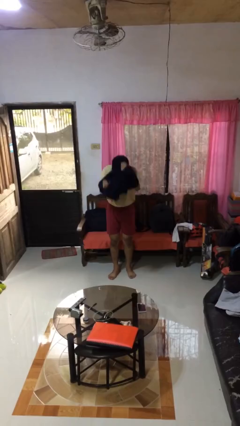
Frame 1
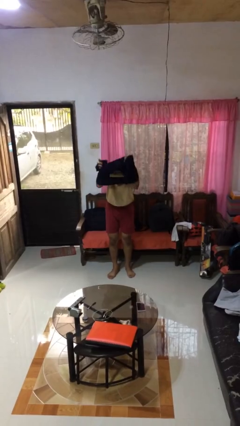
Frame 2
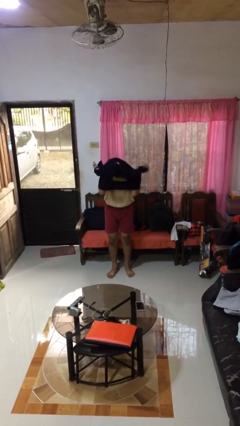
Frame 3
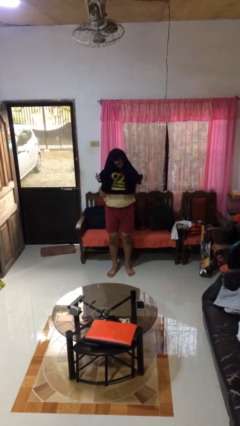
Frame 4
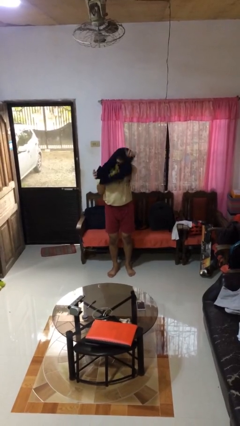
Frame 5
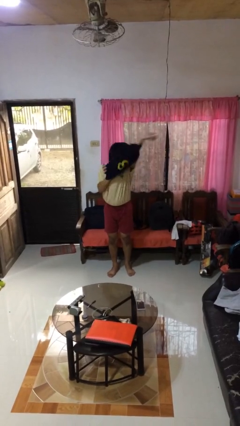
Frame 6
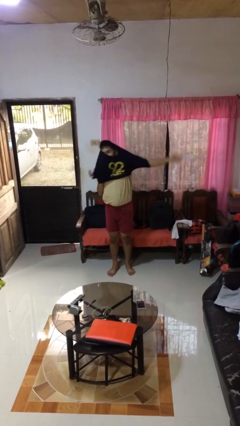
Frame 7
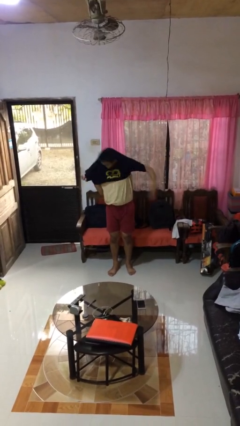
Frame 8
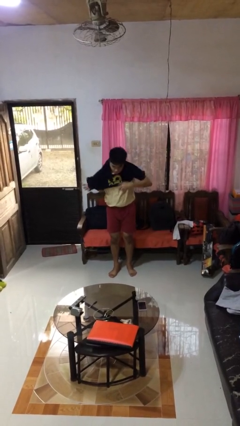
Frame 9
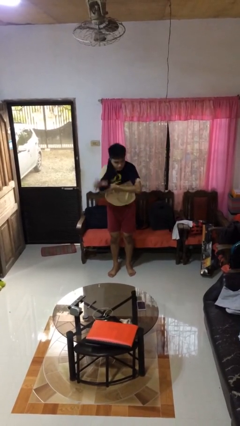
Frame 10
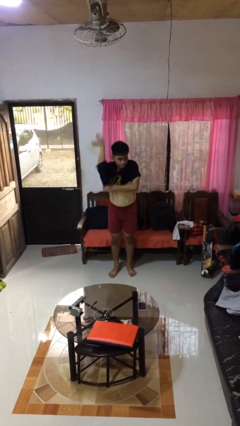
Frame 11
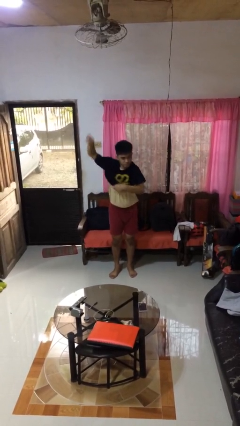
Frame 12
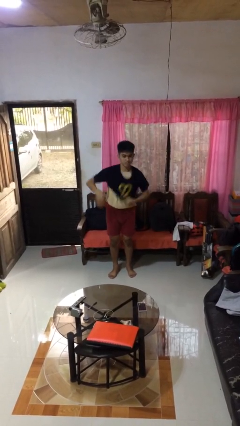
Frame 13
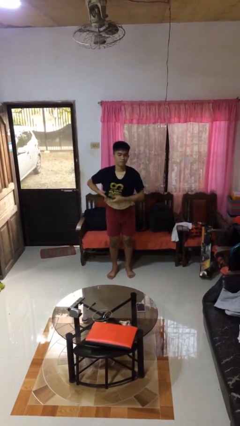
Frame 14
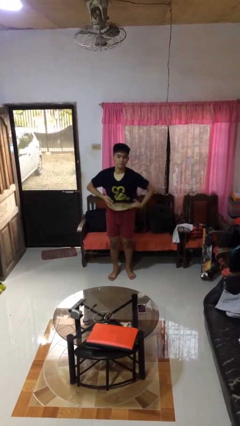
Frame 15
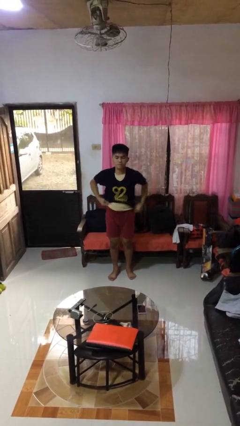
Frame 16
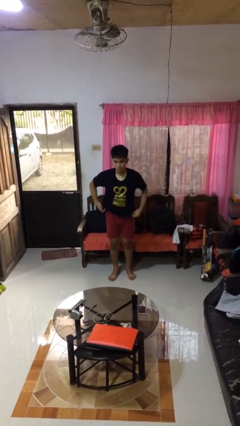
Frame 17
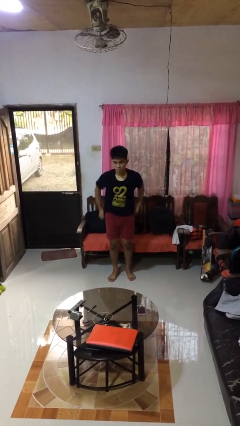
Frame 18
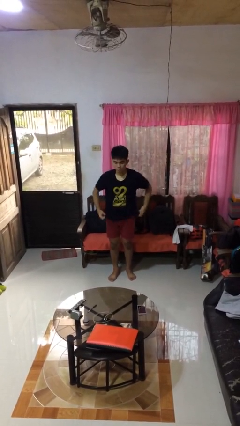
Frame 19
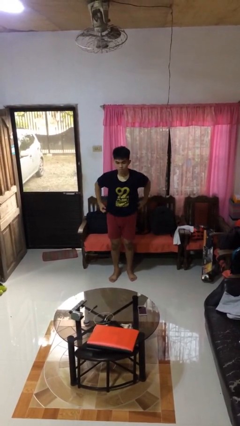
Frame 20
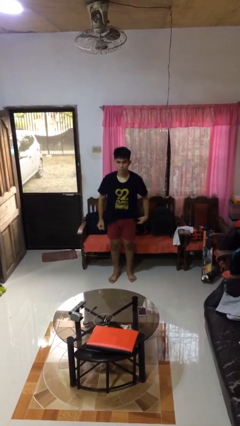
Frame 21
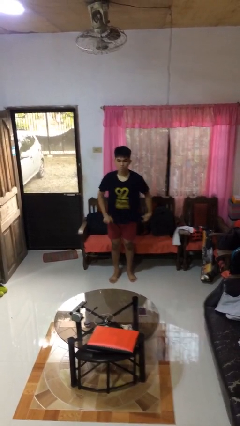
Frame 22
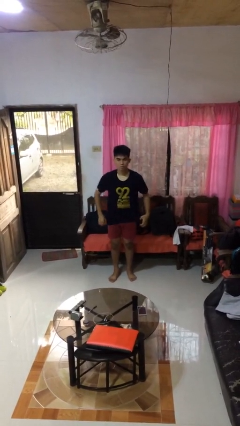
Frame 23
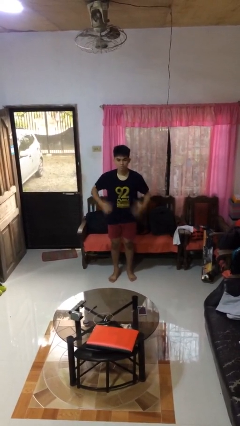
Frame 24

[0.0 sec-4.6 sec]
person puts on shirt

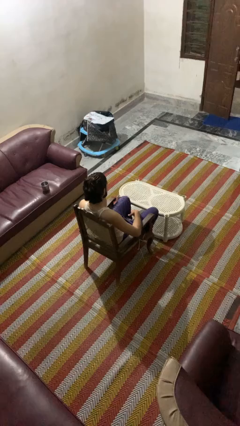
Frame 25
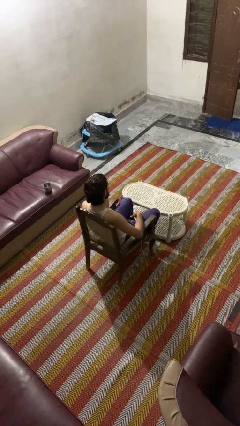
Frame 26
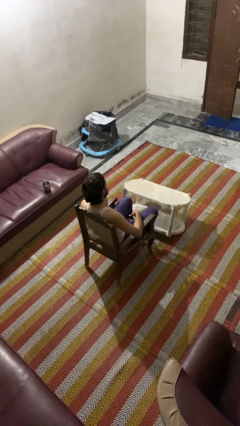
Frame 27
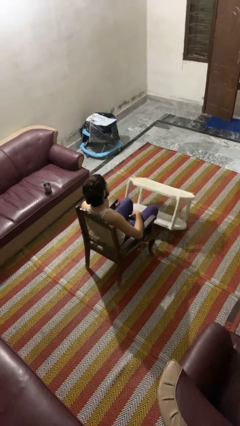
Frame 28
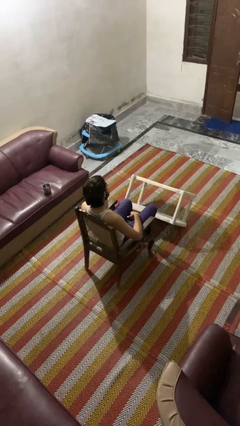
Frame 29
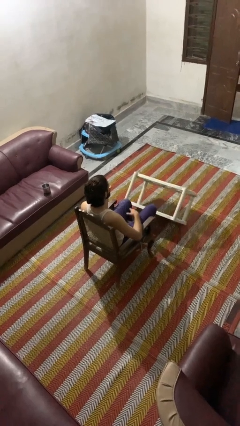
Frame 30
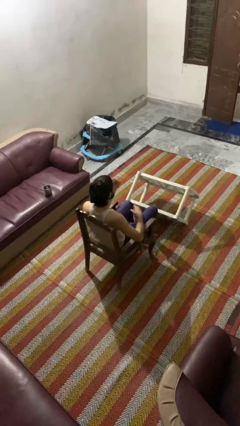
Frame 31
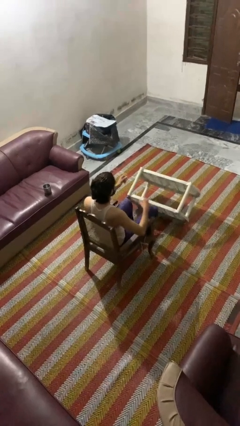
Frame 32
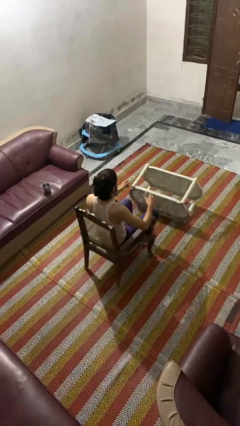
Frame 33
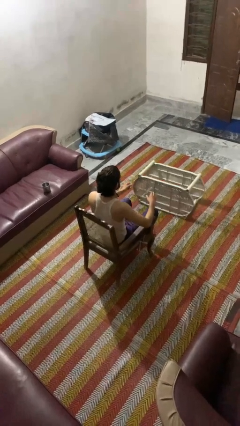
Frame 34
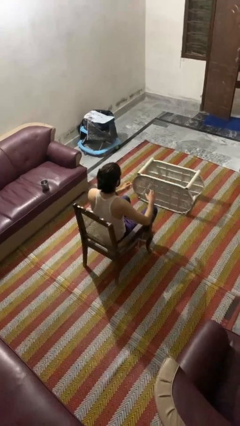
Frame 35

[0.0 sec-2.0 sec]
person knocks over furniture

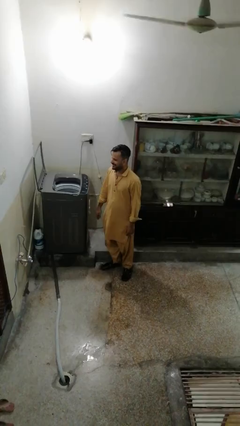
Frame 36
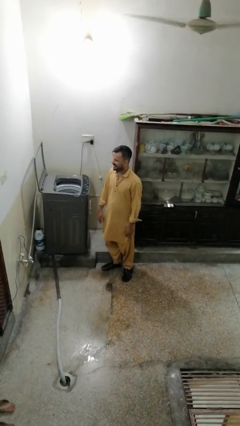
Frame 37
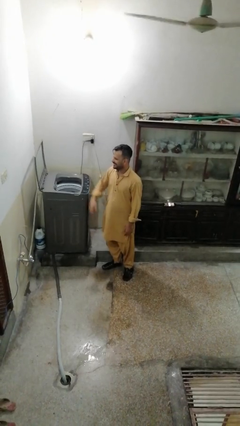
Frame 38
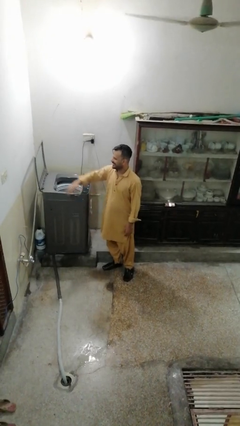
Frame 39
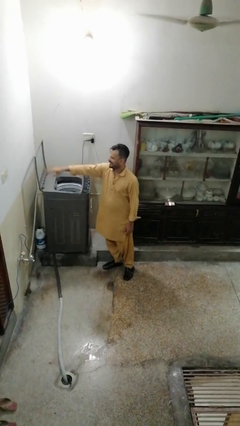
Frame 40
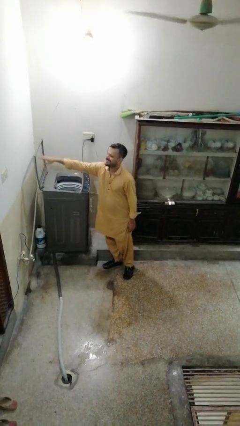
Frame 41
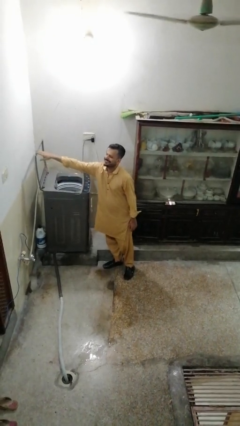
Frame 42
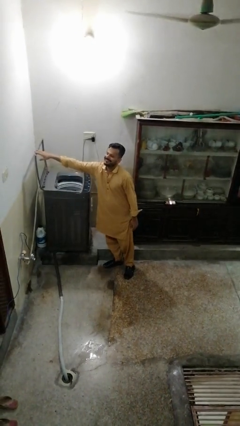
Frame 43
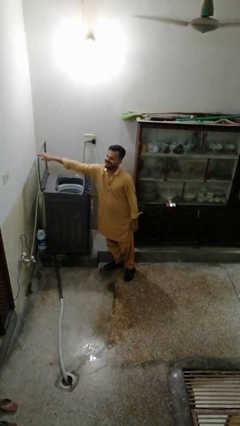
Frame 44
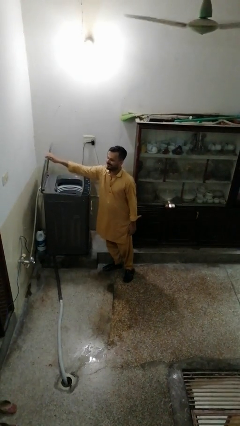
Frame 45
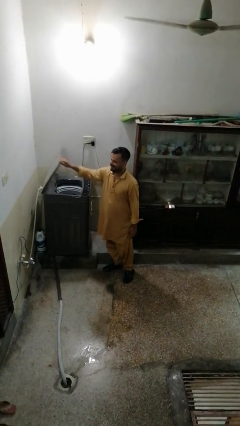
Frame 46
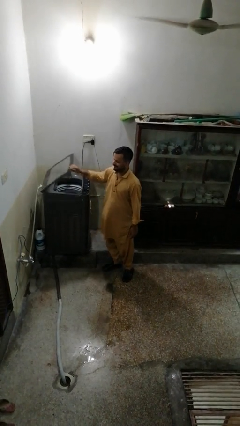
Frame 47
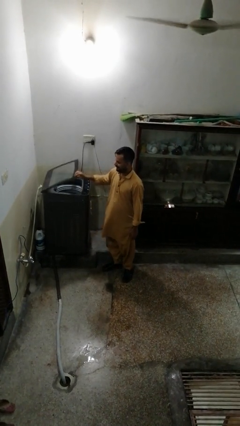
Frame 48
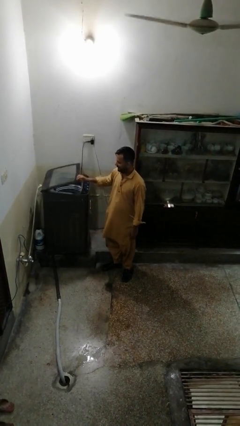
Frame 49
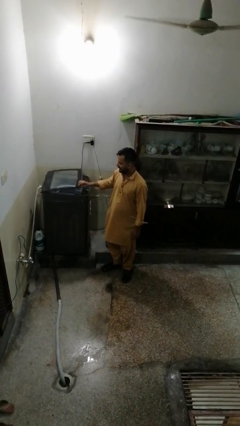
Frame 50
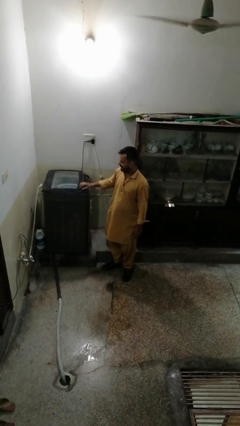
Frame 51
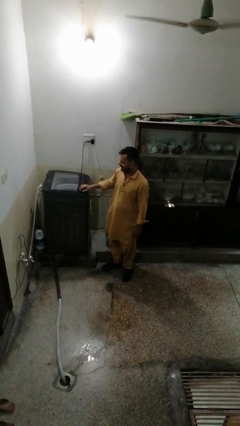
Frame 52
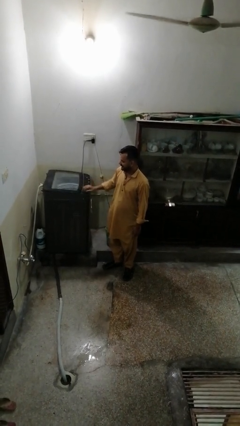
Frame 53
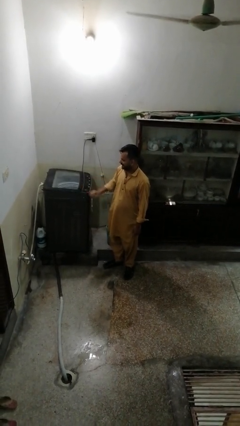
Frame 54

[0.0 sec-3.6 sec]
person closes clothes washer

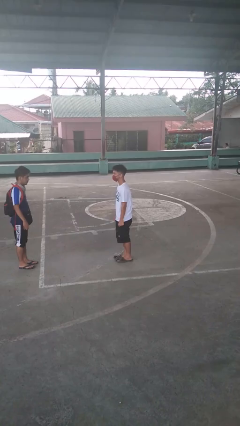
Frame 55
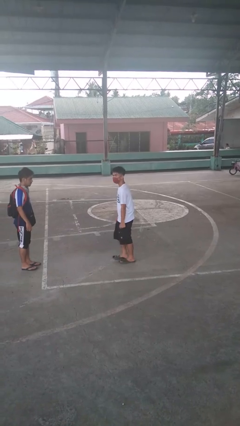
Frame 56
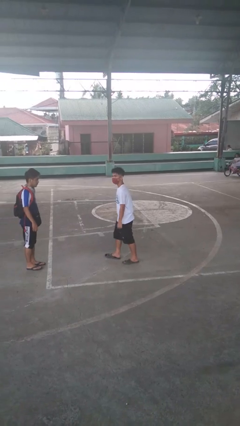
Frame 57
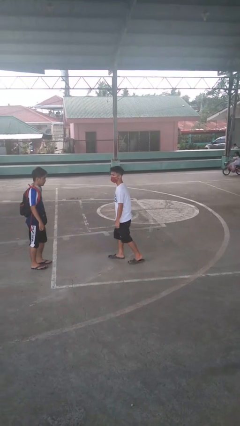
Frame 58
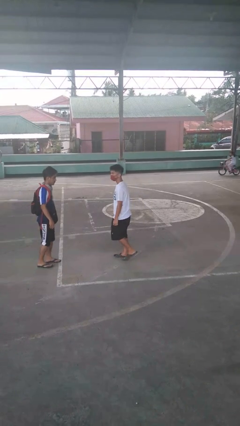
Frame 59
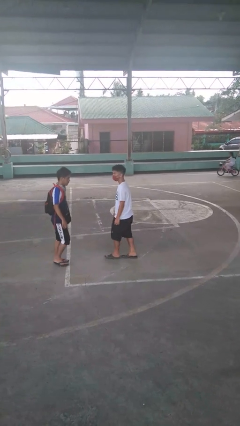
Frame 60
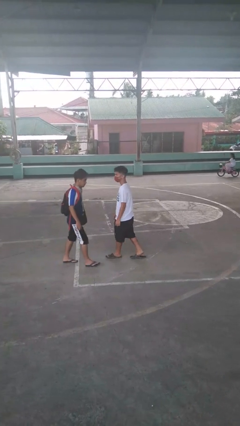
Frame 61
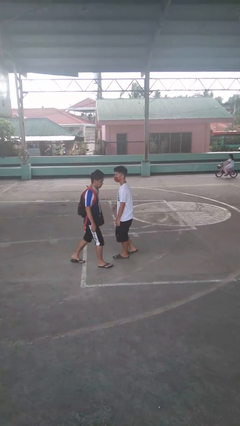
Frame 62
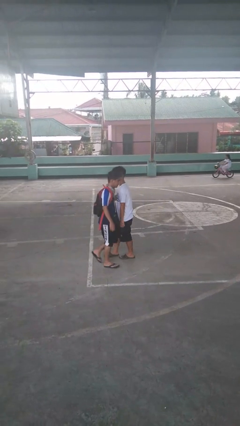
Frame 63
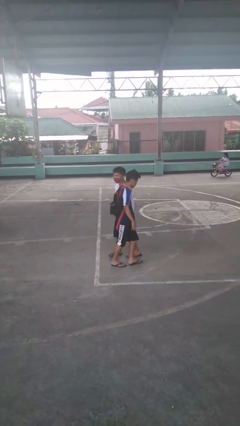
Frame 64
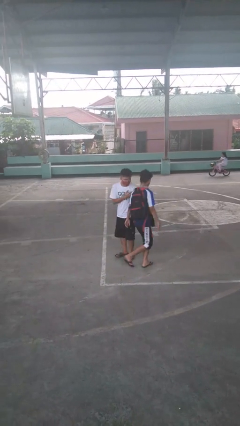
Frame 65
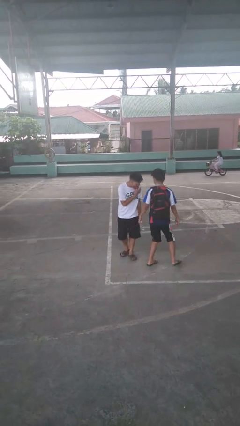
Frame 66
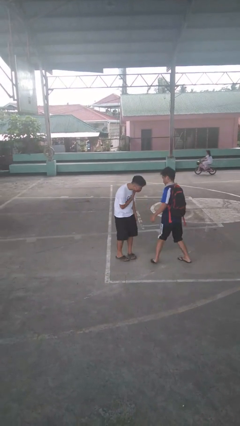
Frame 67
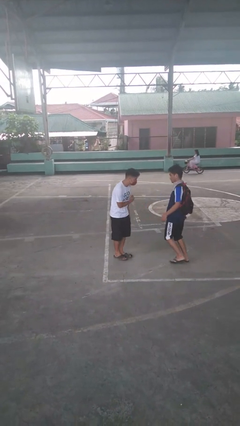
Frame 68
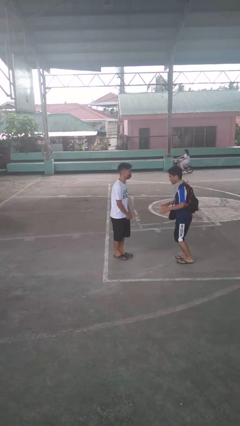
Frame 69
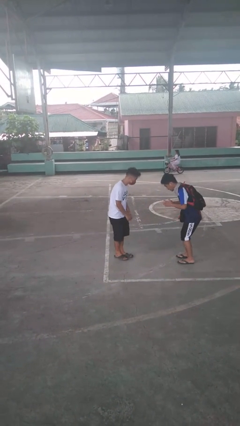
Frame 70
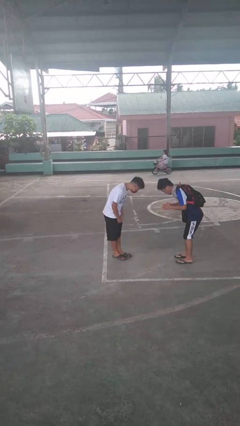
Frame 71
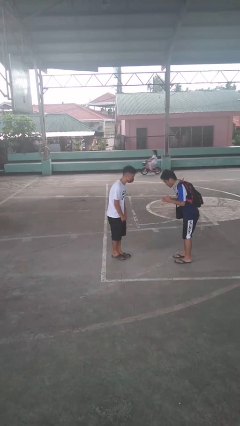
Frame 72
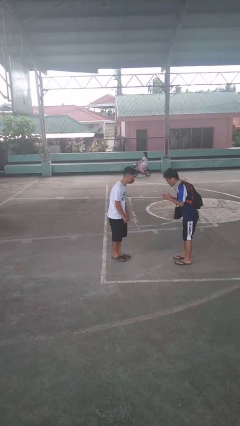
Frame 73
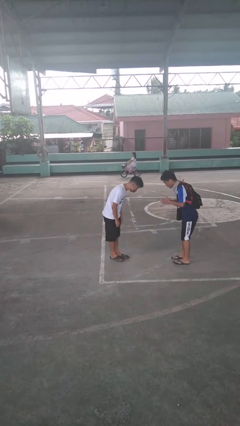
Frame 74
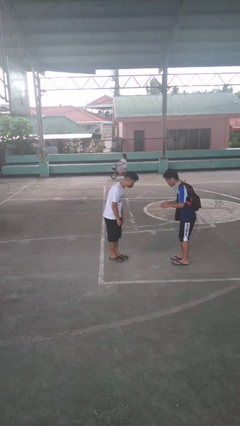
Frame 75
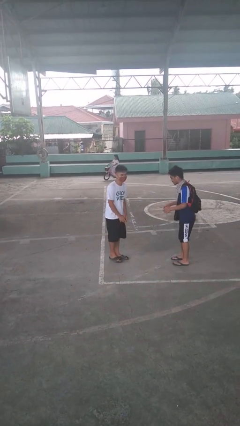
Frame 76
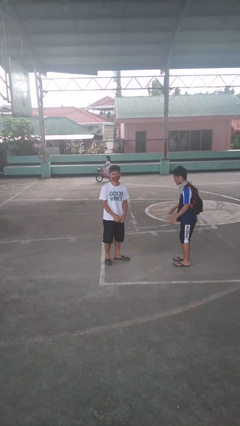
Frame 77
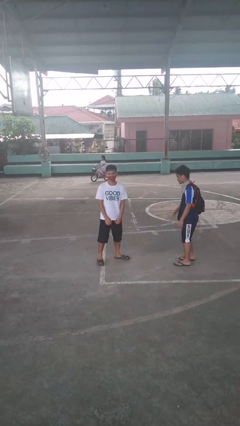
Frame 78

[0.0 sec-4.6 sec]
person bumps into person

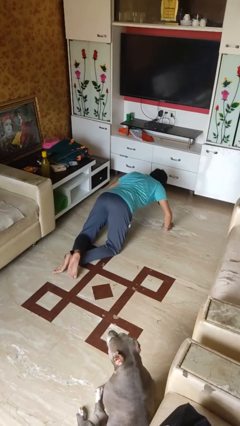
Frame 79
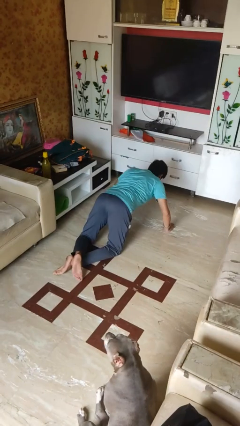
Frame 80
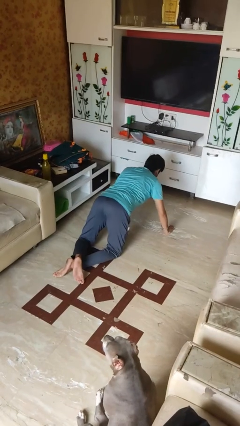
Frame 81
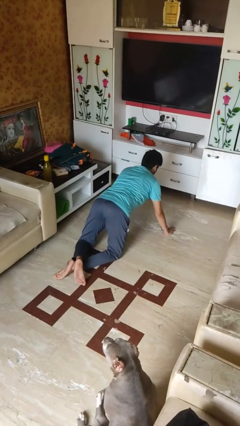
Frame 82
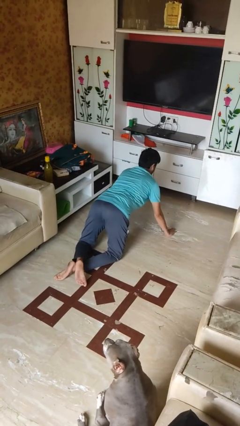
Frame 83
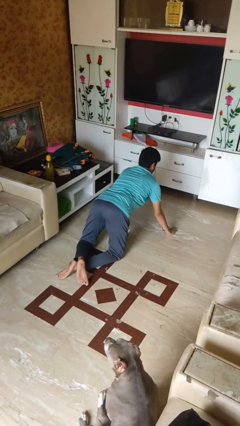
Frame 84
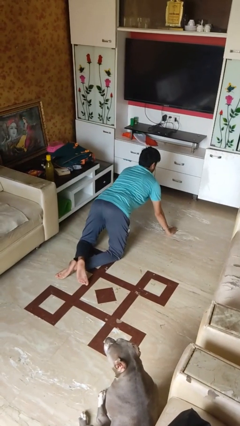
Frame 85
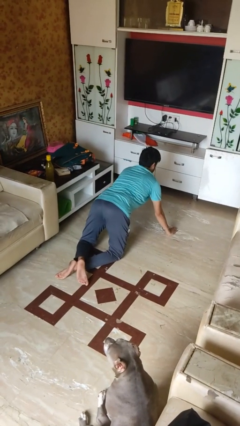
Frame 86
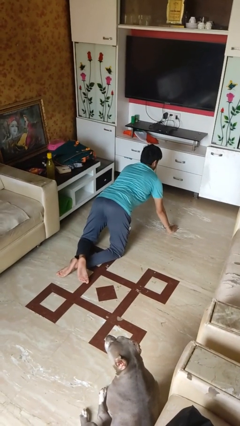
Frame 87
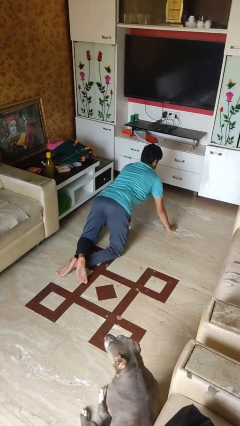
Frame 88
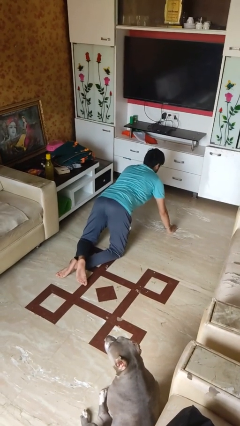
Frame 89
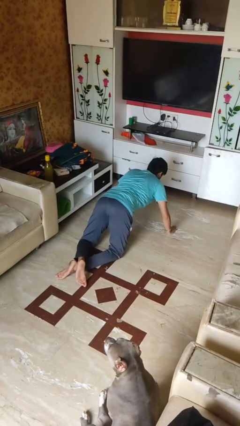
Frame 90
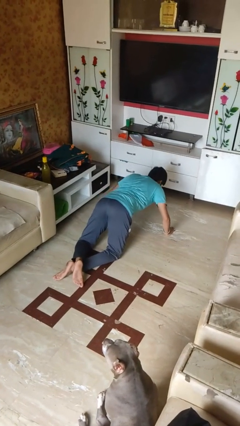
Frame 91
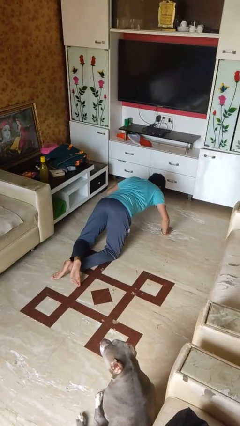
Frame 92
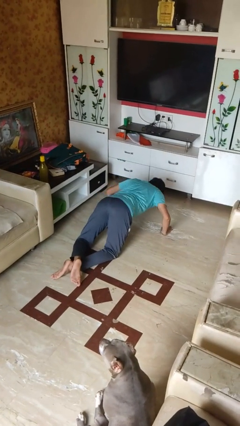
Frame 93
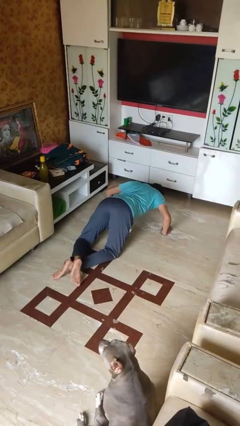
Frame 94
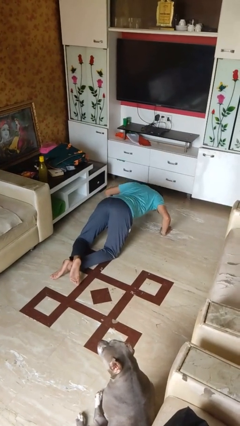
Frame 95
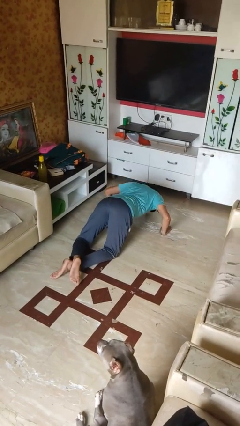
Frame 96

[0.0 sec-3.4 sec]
person exercises with pushup
